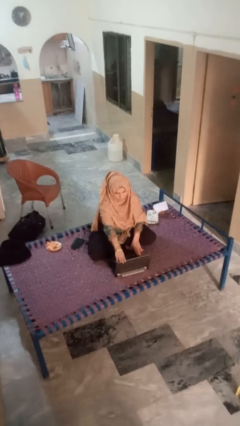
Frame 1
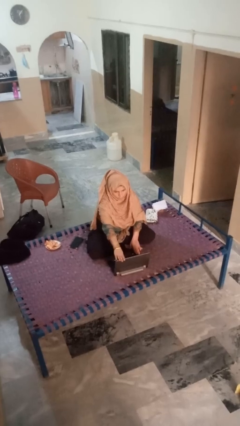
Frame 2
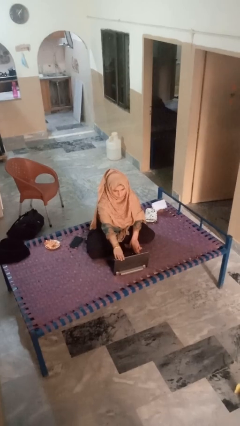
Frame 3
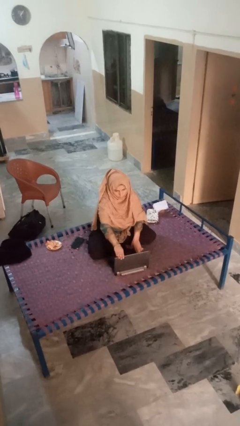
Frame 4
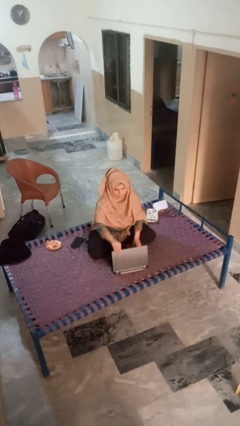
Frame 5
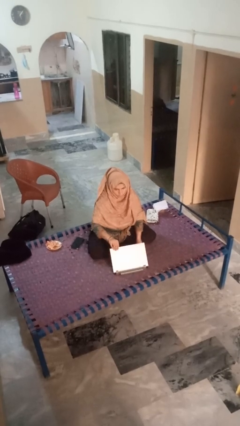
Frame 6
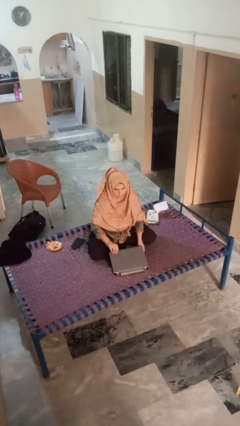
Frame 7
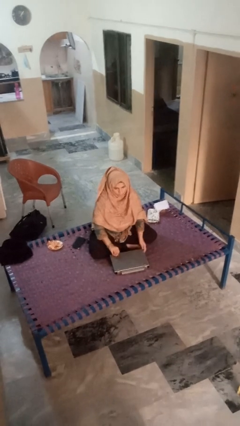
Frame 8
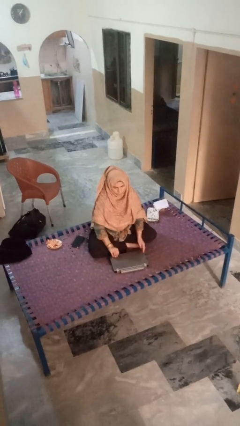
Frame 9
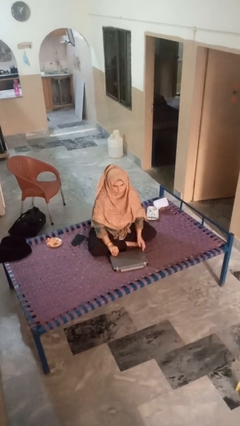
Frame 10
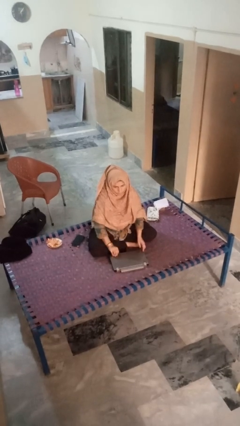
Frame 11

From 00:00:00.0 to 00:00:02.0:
person closes laptop

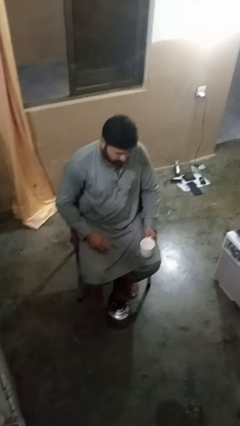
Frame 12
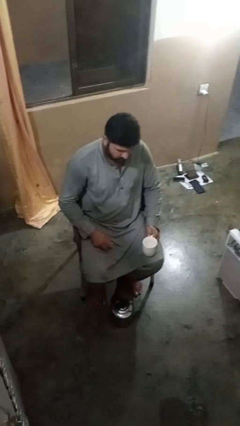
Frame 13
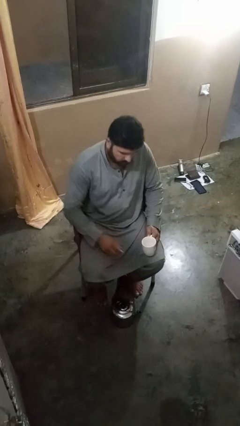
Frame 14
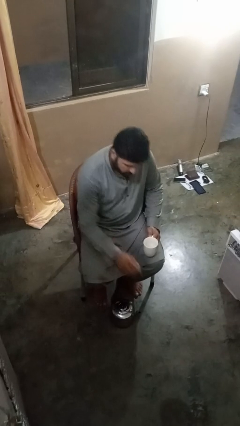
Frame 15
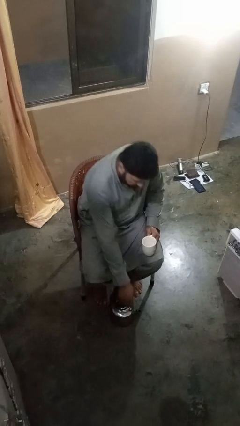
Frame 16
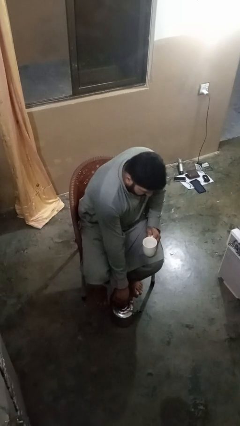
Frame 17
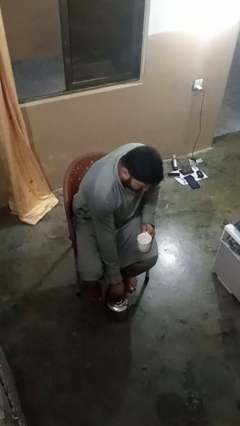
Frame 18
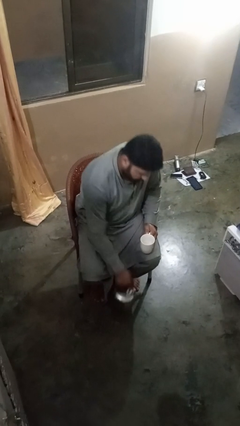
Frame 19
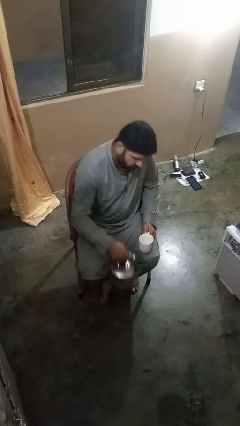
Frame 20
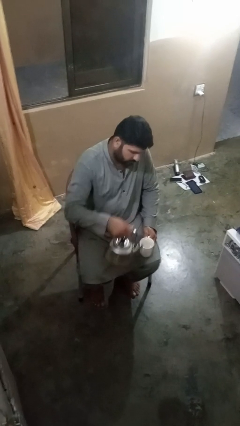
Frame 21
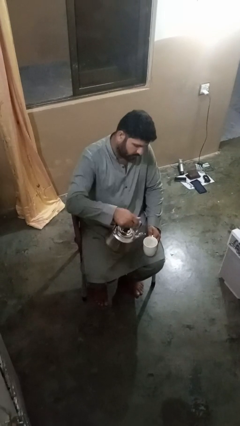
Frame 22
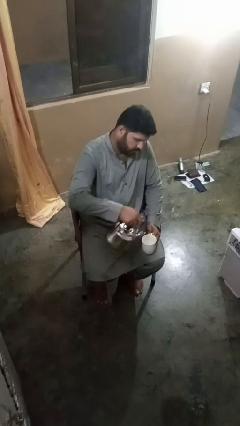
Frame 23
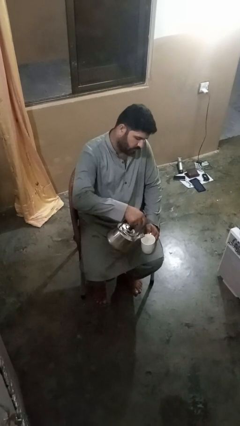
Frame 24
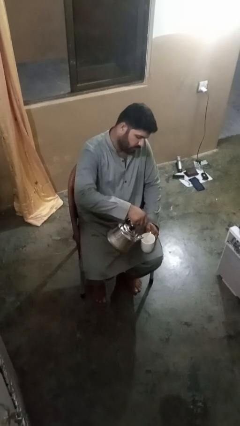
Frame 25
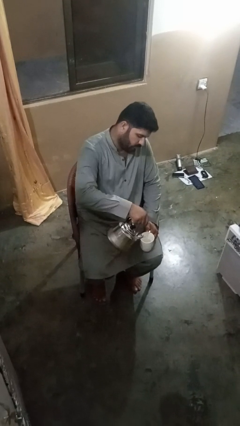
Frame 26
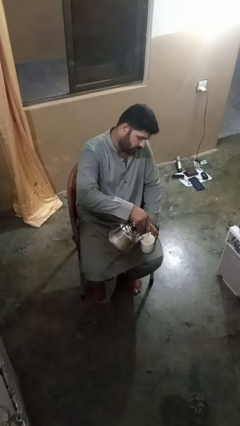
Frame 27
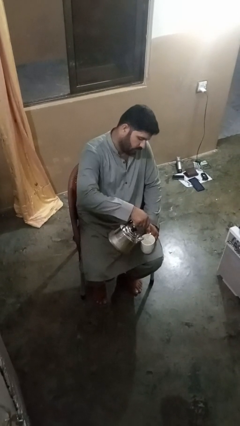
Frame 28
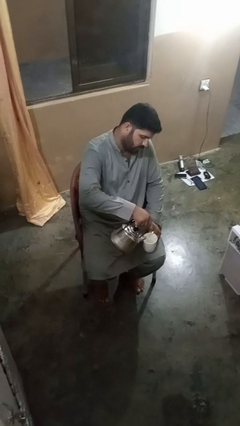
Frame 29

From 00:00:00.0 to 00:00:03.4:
person pours coffee into mug

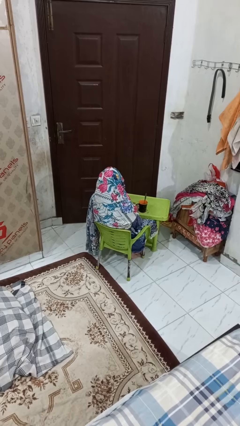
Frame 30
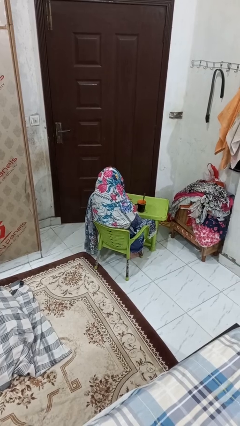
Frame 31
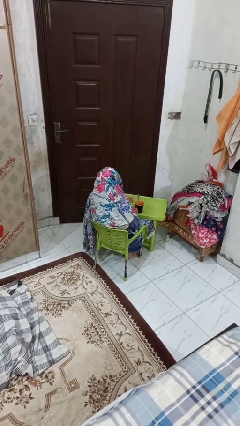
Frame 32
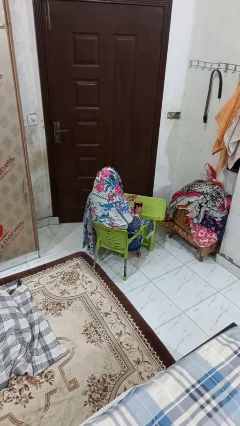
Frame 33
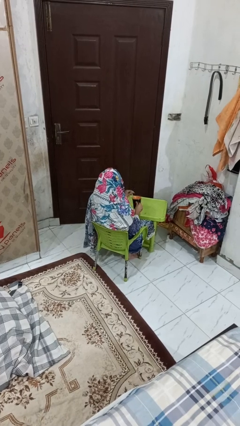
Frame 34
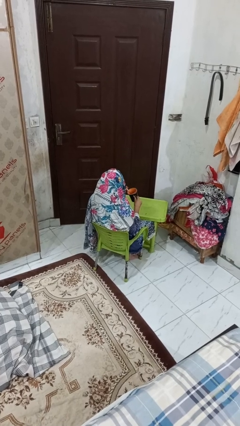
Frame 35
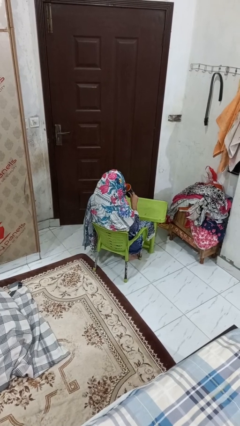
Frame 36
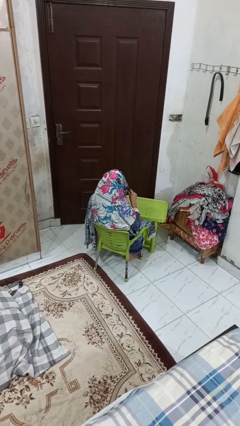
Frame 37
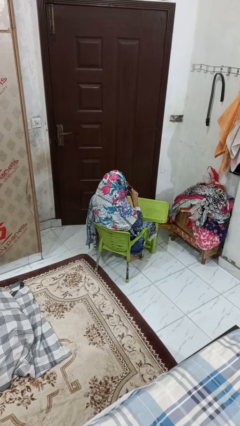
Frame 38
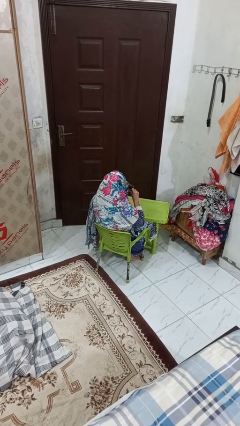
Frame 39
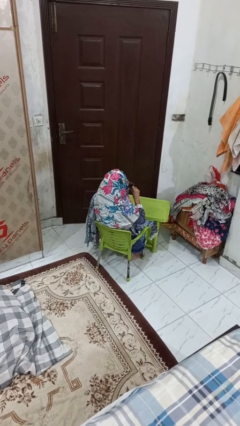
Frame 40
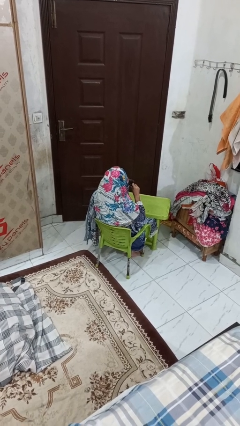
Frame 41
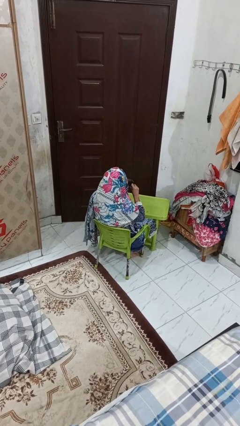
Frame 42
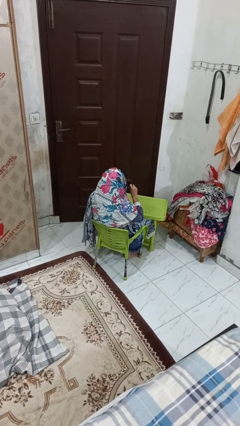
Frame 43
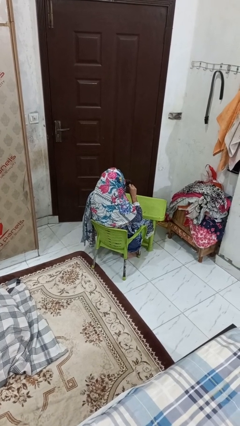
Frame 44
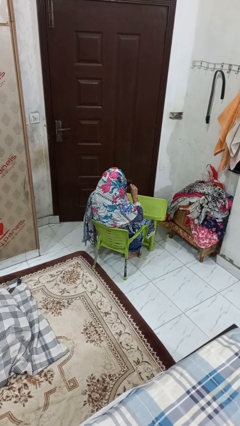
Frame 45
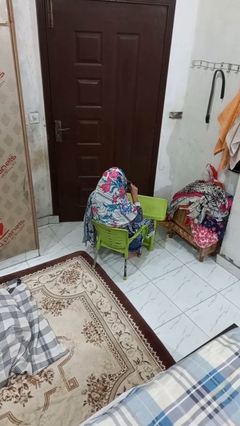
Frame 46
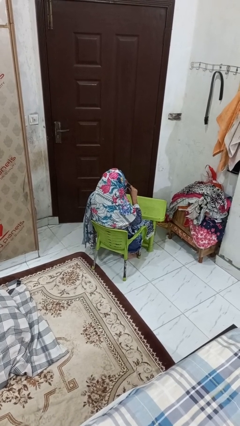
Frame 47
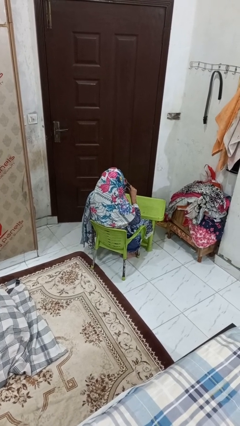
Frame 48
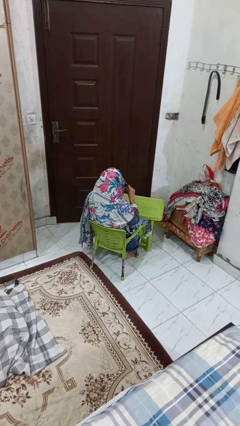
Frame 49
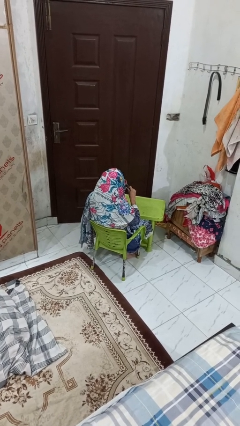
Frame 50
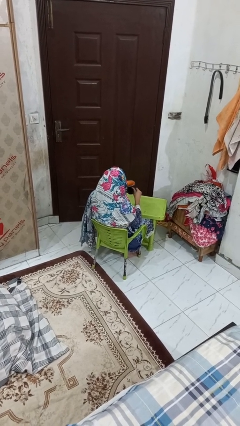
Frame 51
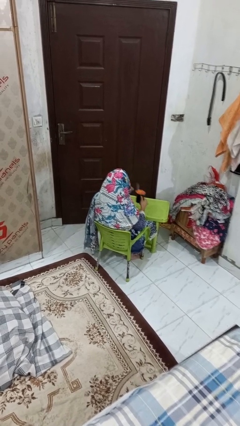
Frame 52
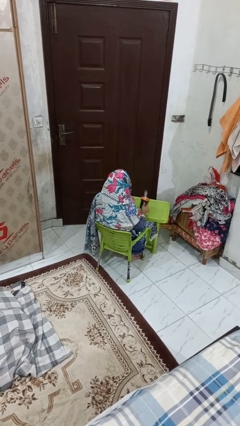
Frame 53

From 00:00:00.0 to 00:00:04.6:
person drinks from mug

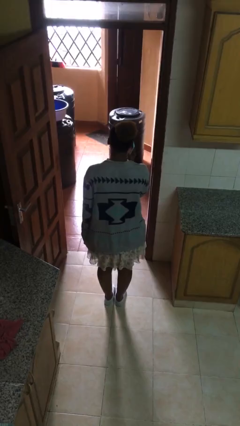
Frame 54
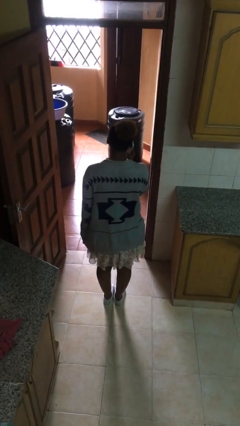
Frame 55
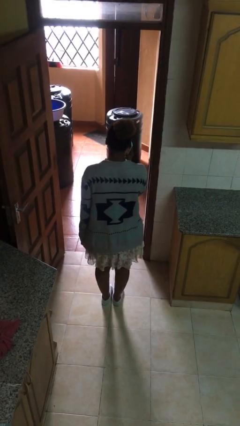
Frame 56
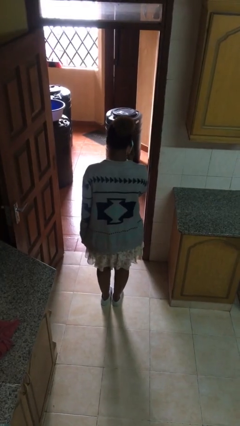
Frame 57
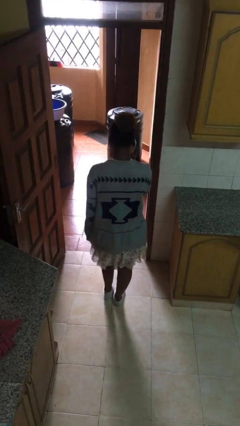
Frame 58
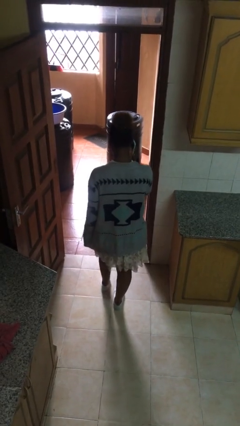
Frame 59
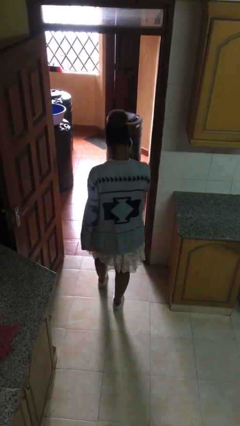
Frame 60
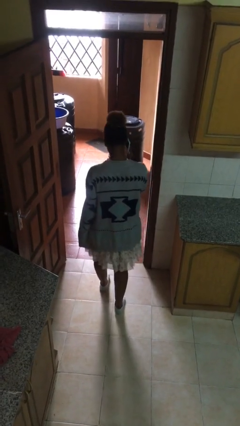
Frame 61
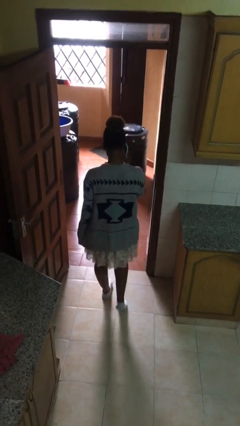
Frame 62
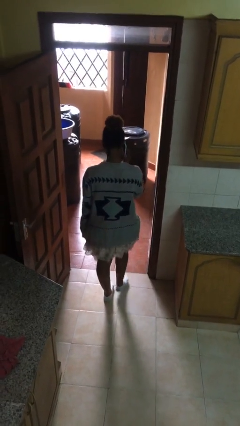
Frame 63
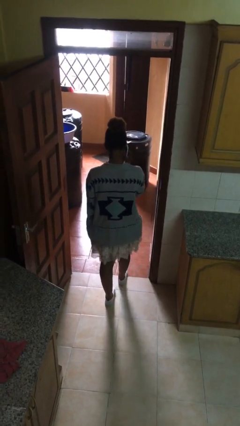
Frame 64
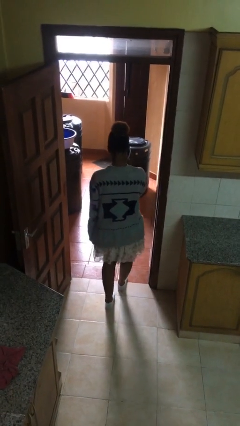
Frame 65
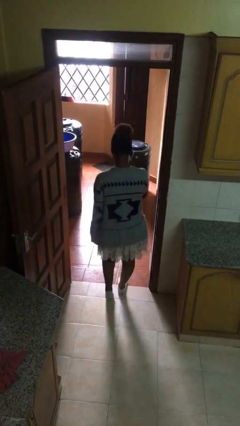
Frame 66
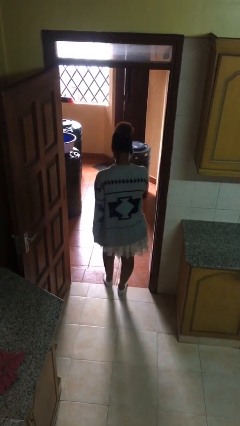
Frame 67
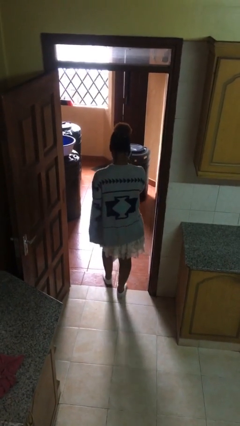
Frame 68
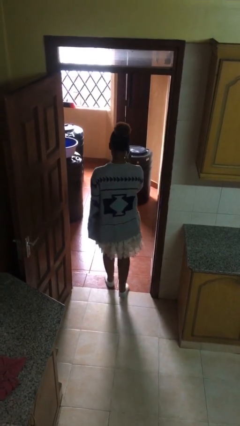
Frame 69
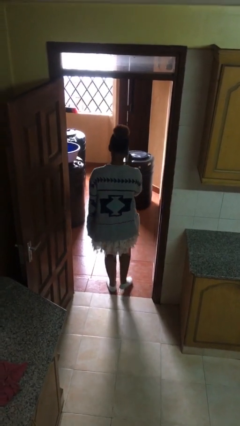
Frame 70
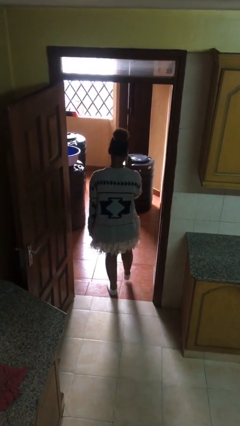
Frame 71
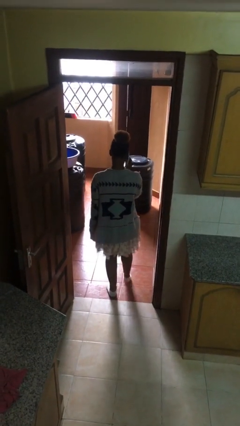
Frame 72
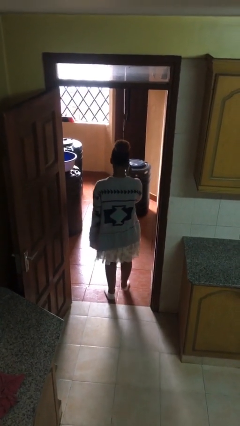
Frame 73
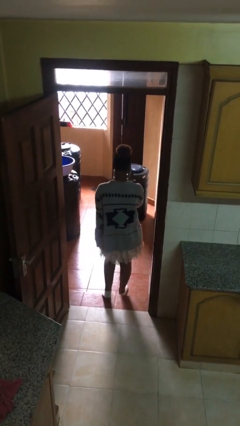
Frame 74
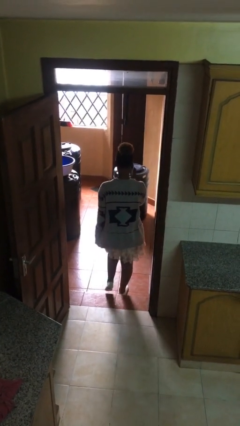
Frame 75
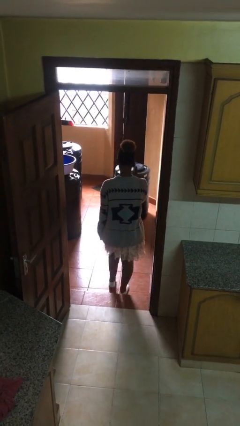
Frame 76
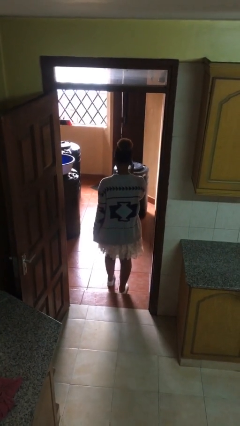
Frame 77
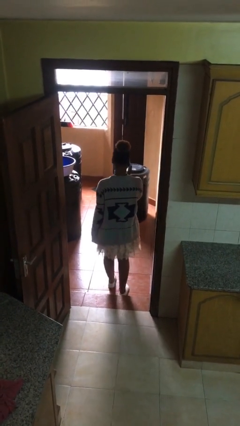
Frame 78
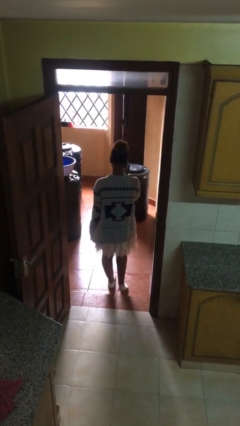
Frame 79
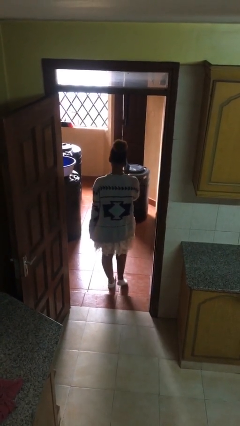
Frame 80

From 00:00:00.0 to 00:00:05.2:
person exits scene through structure

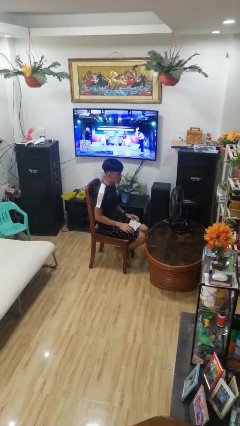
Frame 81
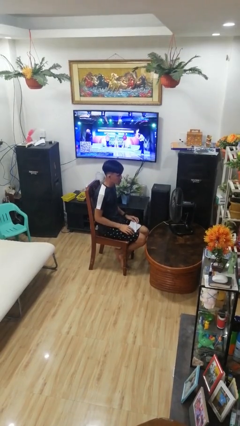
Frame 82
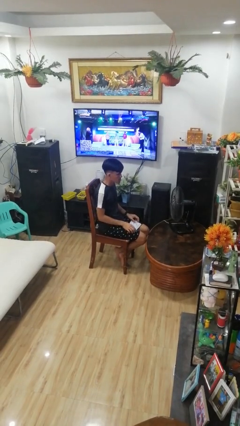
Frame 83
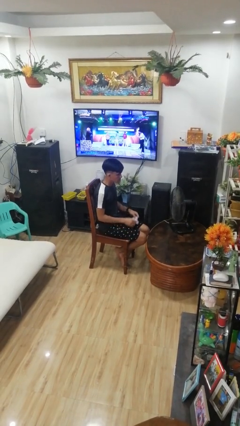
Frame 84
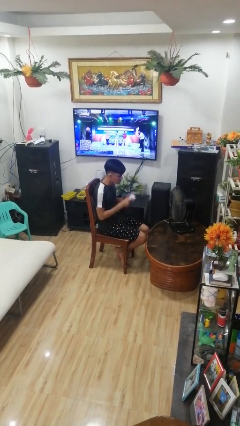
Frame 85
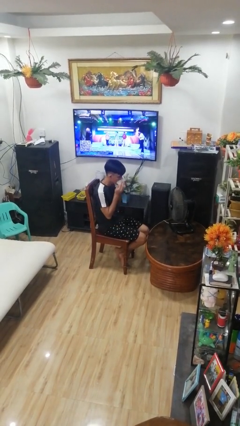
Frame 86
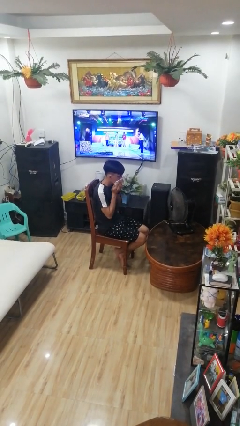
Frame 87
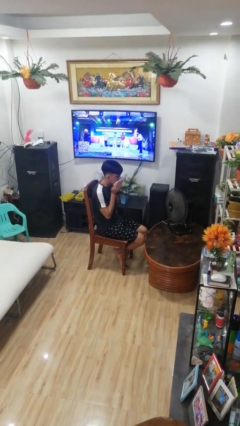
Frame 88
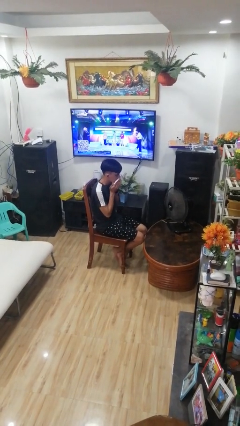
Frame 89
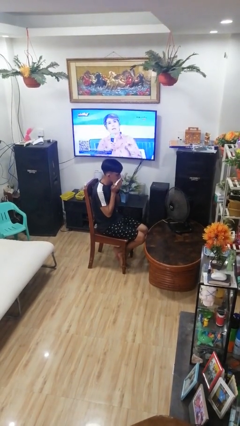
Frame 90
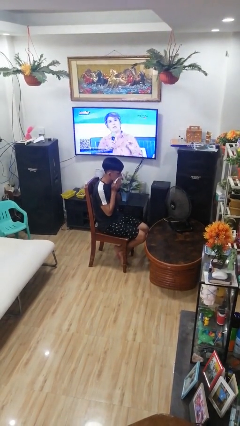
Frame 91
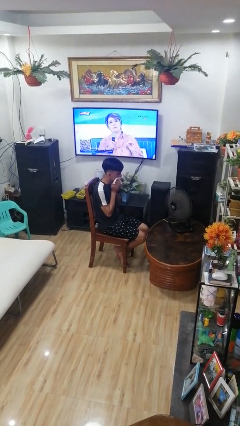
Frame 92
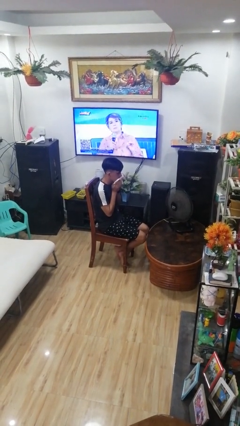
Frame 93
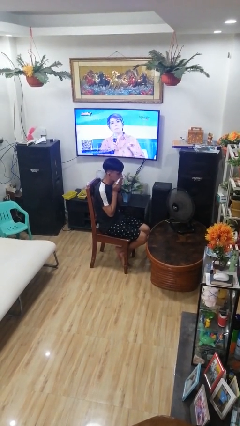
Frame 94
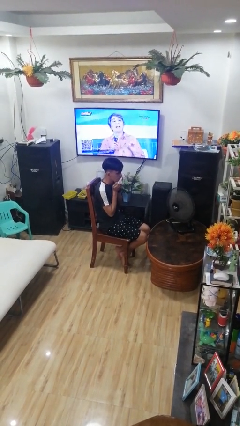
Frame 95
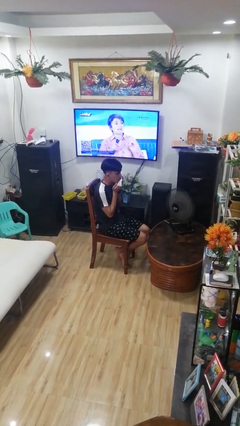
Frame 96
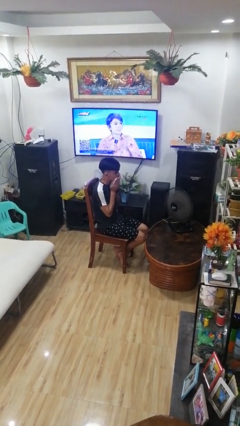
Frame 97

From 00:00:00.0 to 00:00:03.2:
person wipes mouth with napkin
